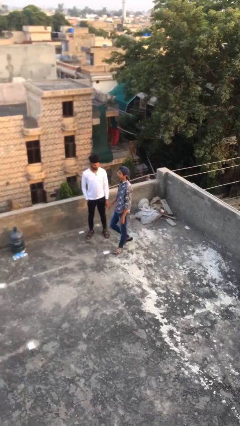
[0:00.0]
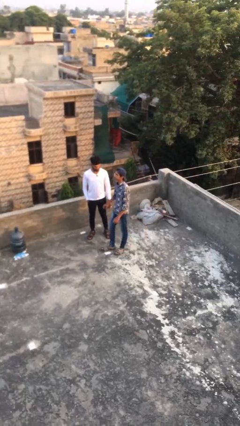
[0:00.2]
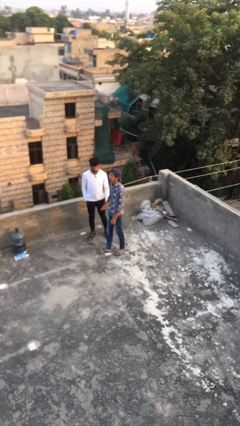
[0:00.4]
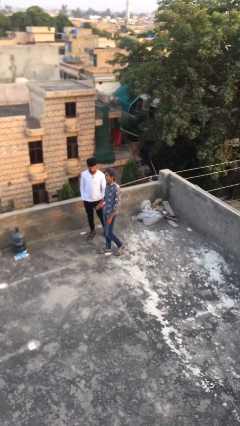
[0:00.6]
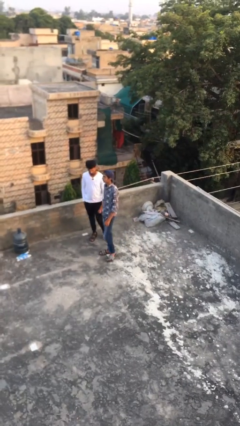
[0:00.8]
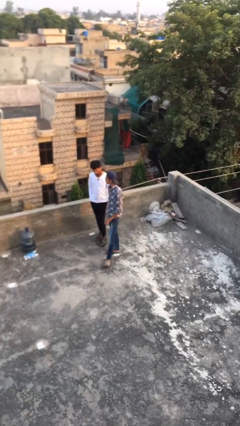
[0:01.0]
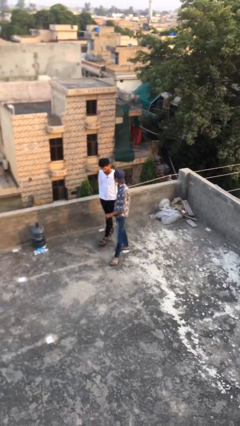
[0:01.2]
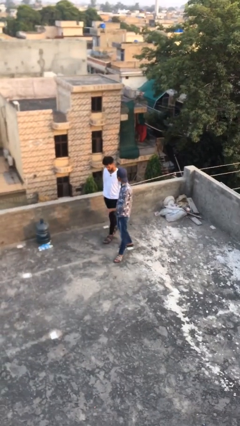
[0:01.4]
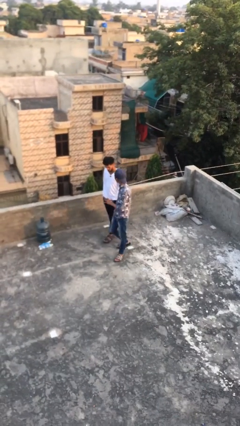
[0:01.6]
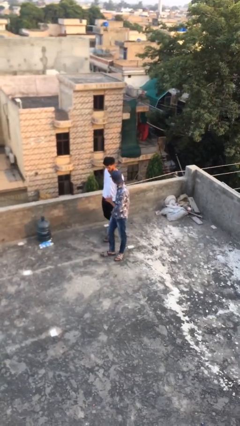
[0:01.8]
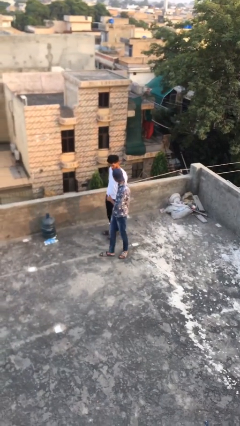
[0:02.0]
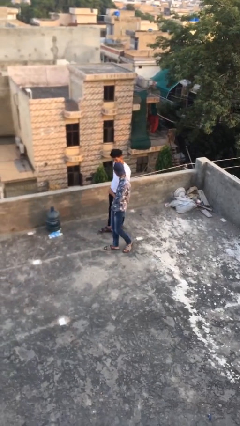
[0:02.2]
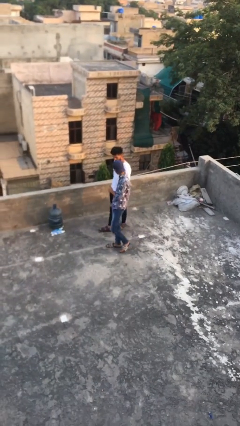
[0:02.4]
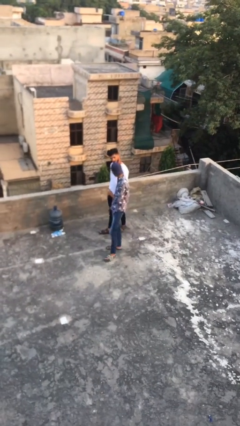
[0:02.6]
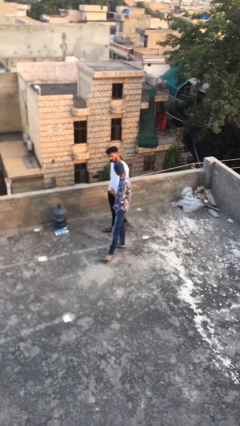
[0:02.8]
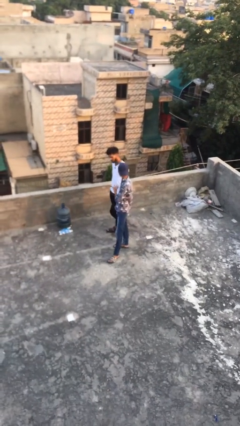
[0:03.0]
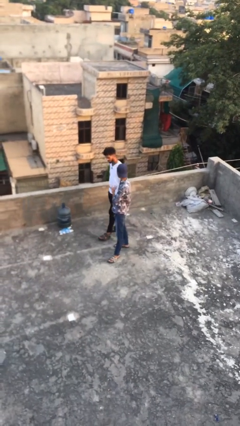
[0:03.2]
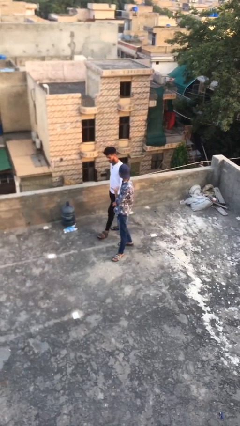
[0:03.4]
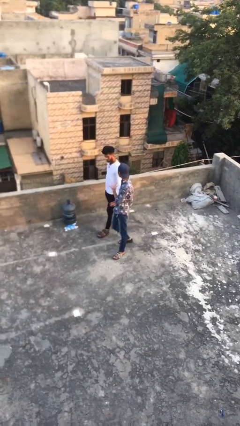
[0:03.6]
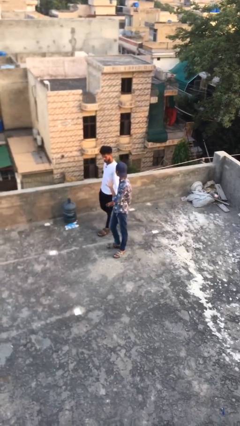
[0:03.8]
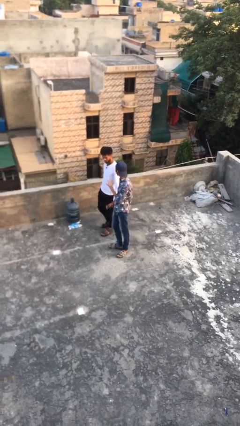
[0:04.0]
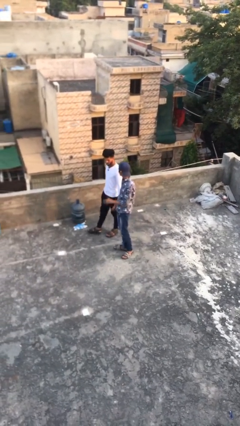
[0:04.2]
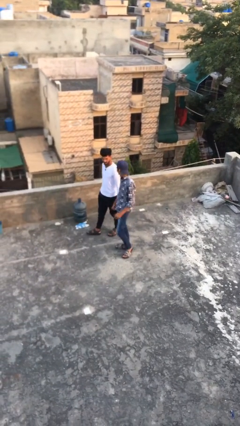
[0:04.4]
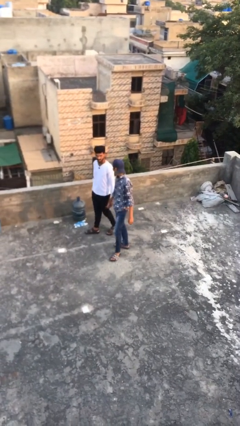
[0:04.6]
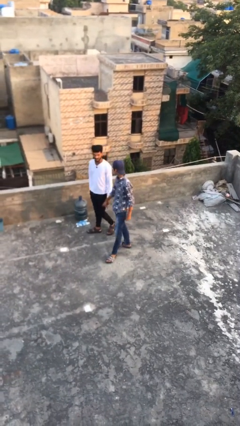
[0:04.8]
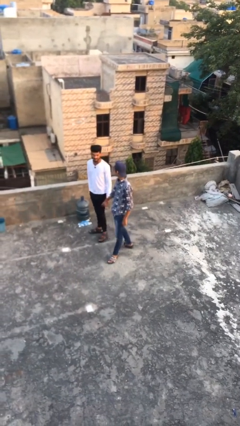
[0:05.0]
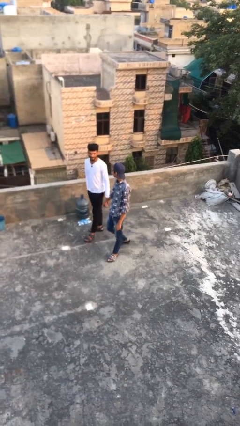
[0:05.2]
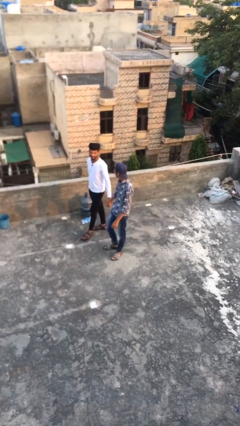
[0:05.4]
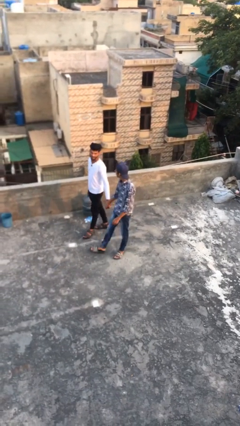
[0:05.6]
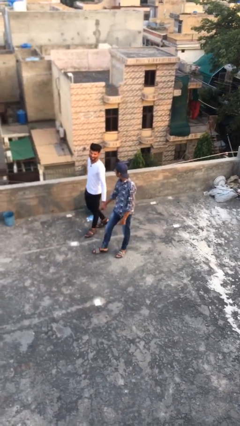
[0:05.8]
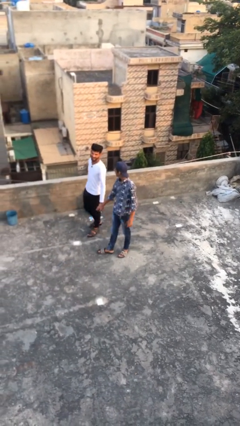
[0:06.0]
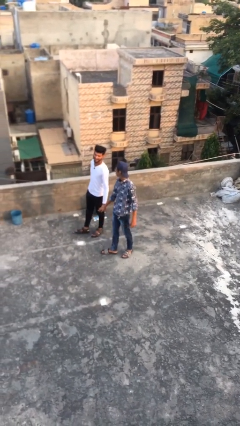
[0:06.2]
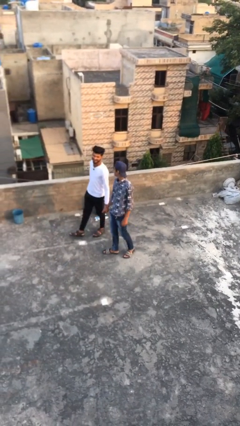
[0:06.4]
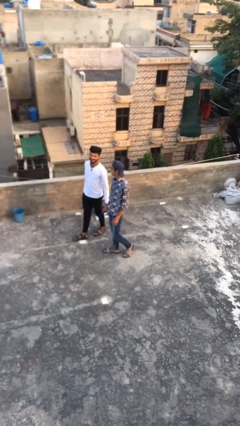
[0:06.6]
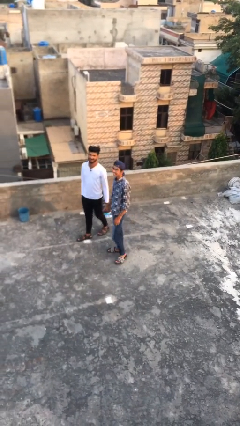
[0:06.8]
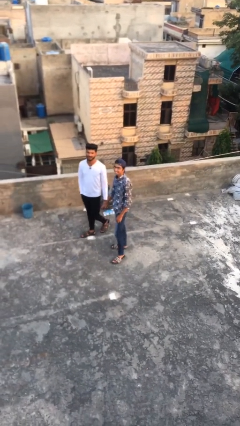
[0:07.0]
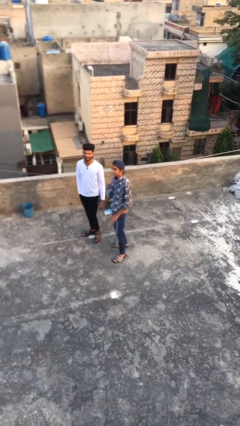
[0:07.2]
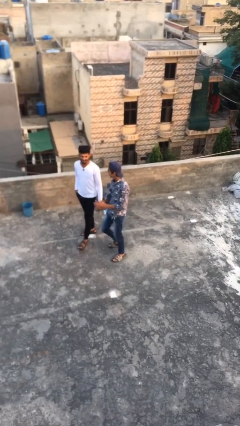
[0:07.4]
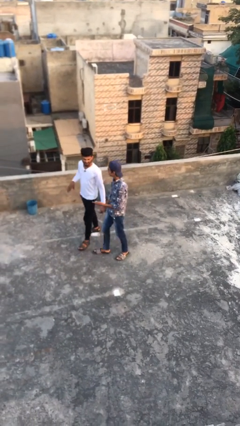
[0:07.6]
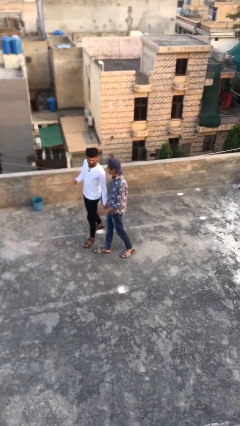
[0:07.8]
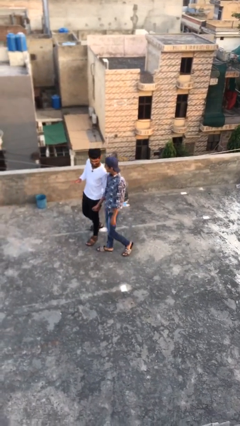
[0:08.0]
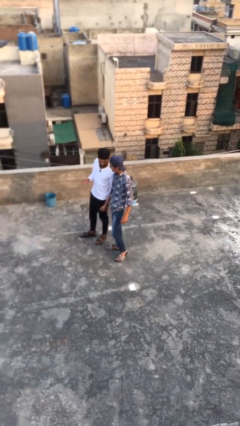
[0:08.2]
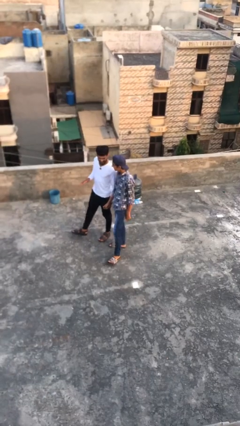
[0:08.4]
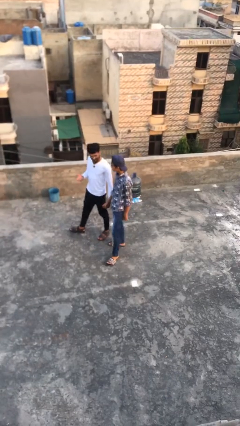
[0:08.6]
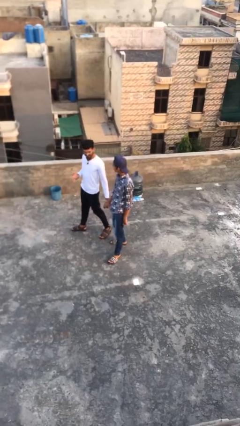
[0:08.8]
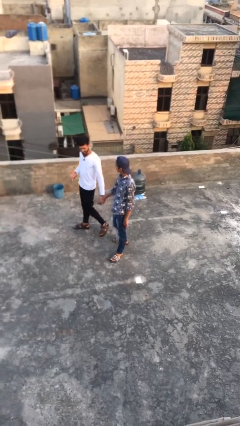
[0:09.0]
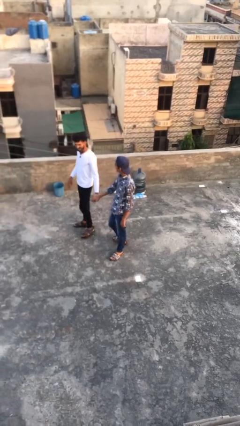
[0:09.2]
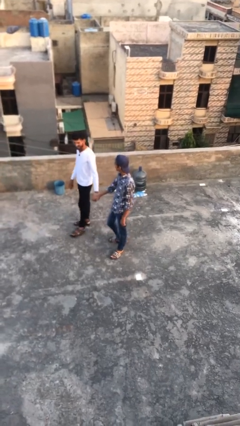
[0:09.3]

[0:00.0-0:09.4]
person holds hand

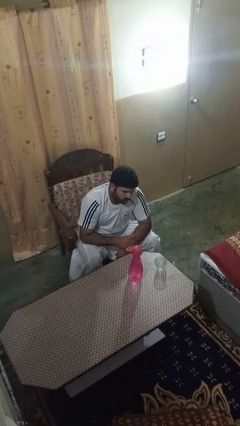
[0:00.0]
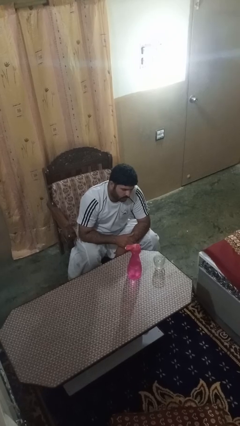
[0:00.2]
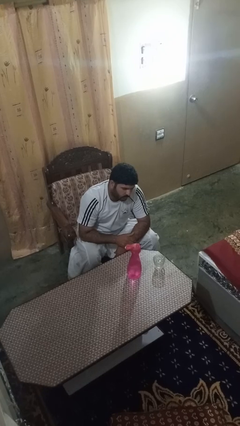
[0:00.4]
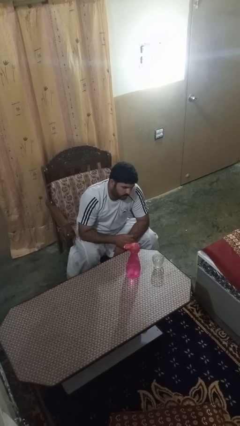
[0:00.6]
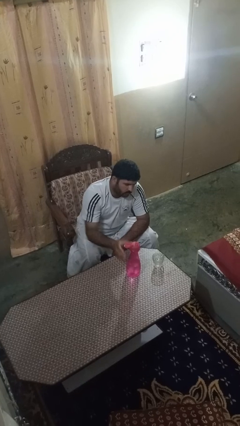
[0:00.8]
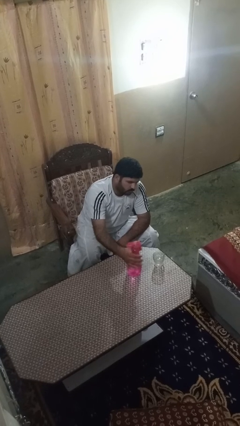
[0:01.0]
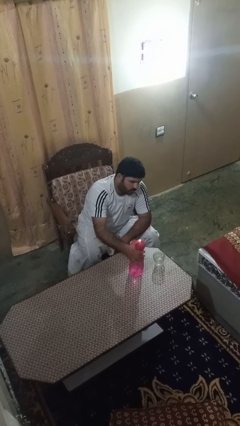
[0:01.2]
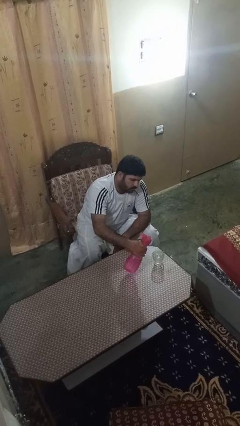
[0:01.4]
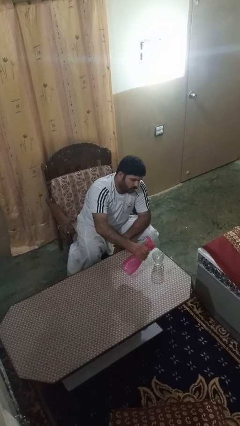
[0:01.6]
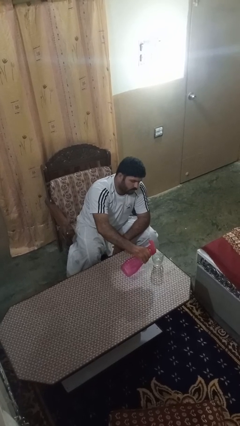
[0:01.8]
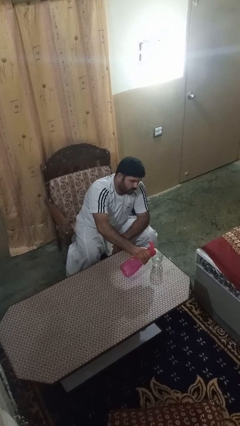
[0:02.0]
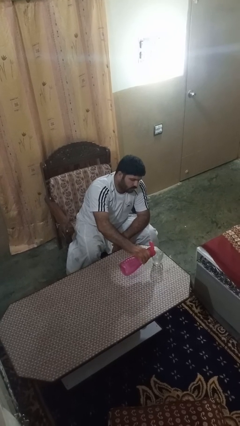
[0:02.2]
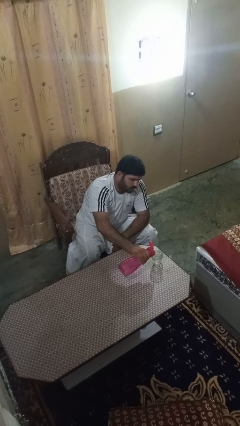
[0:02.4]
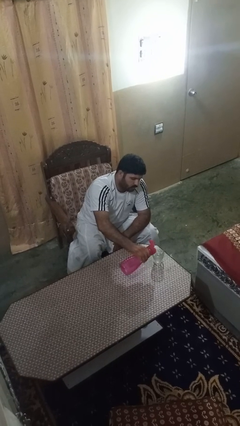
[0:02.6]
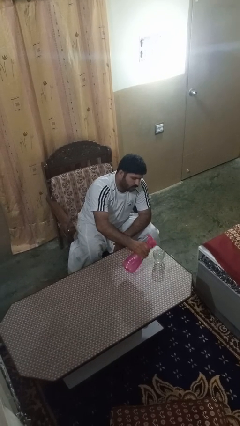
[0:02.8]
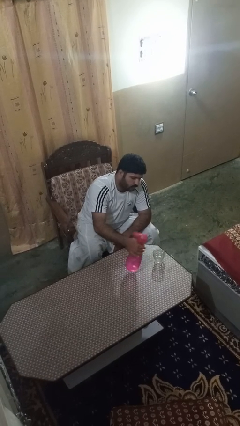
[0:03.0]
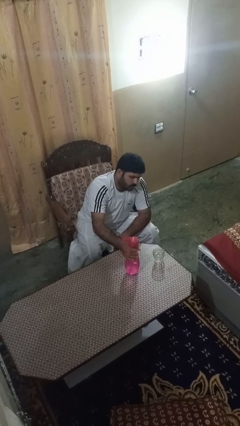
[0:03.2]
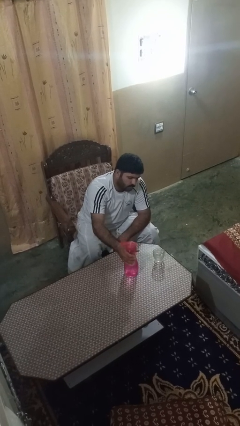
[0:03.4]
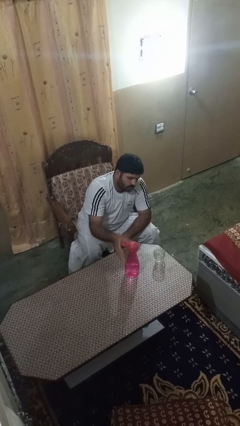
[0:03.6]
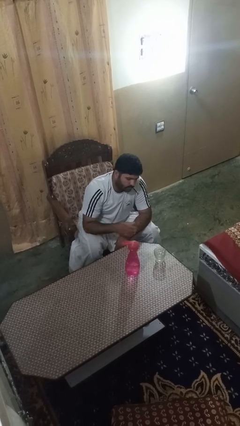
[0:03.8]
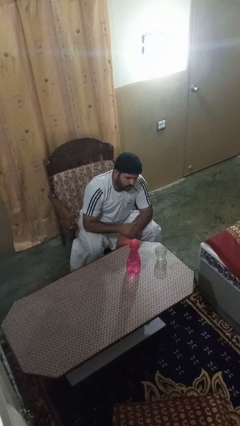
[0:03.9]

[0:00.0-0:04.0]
person pours liquid into cup

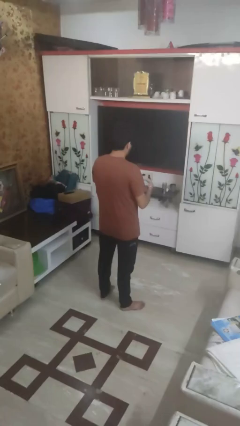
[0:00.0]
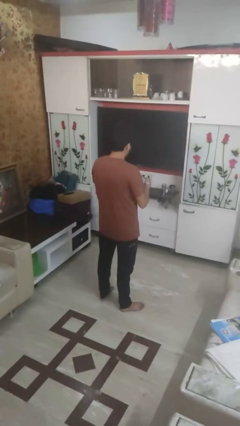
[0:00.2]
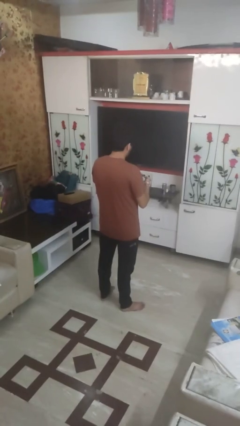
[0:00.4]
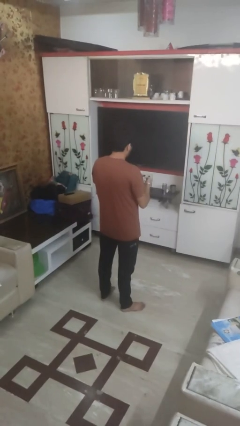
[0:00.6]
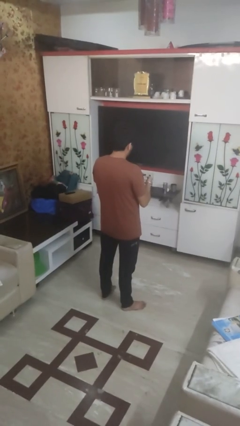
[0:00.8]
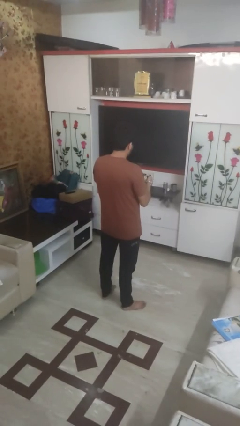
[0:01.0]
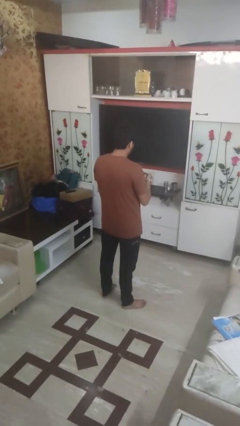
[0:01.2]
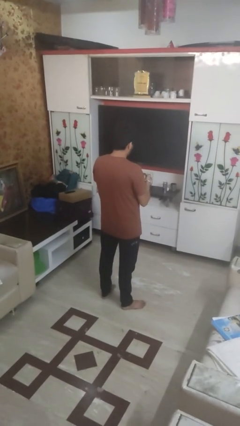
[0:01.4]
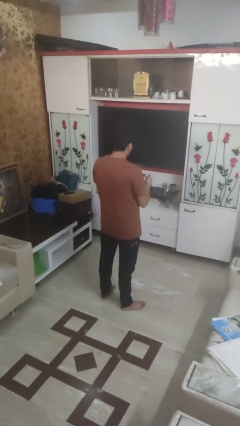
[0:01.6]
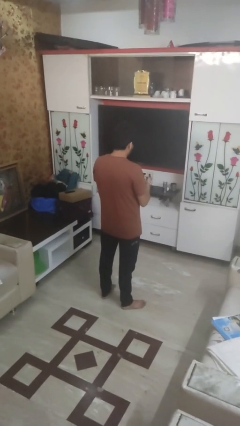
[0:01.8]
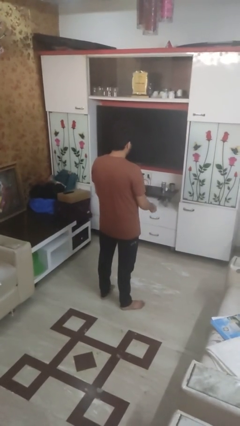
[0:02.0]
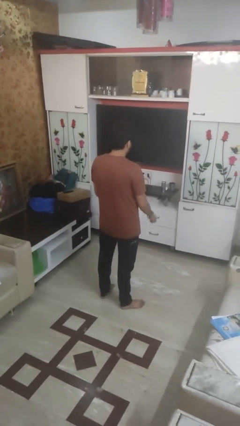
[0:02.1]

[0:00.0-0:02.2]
person files fingernails

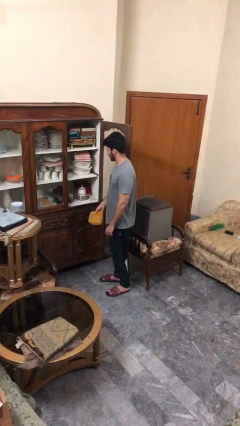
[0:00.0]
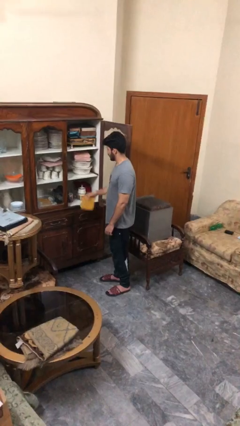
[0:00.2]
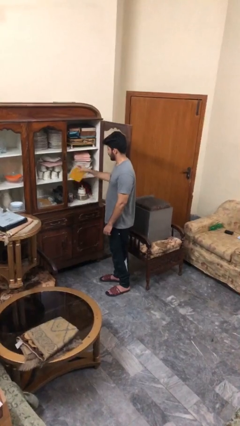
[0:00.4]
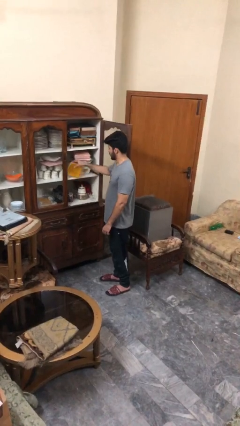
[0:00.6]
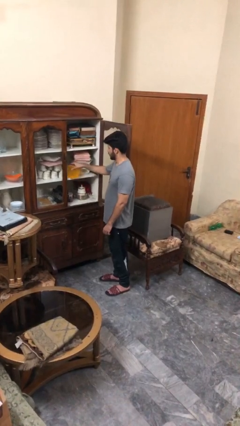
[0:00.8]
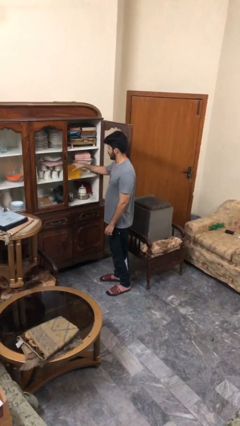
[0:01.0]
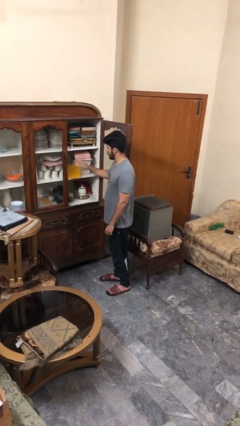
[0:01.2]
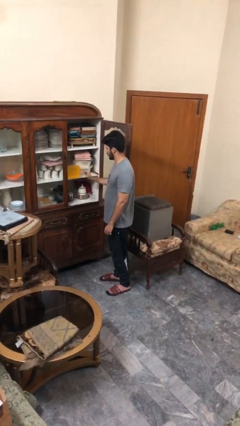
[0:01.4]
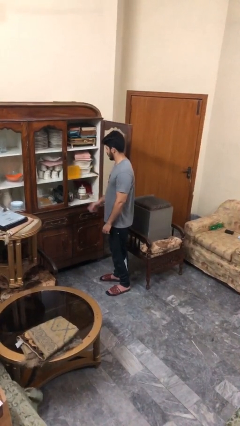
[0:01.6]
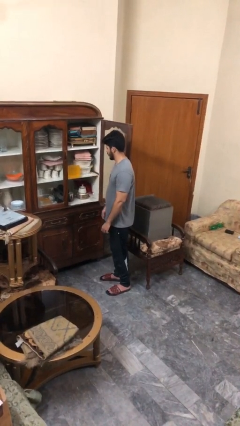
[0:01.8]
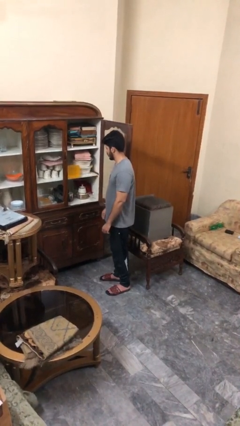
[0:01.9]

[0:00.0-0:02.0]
person puts down object into cabinet
